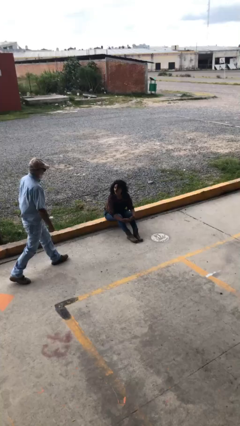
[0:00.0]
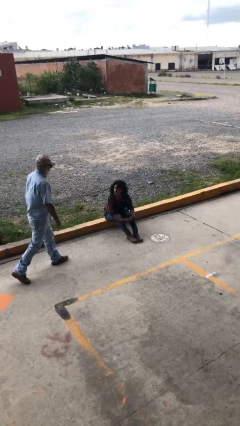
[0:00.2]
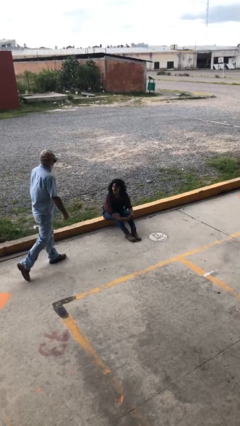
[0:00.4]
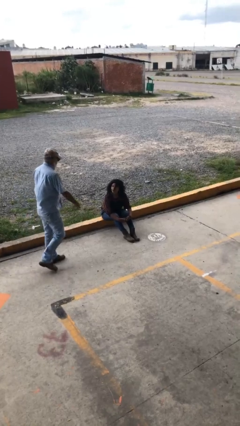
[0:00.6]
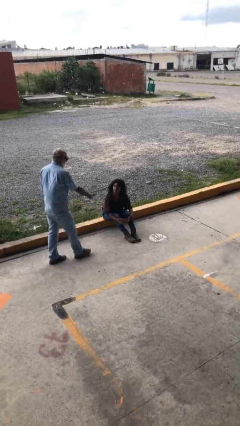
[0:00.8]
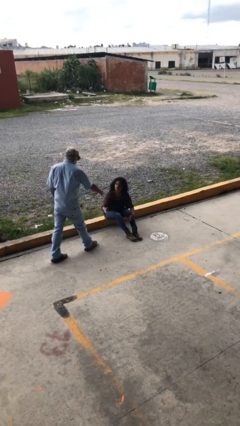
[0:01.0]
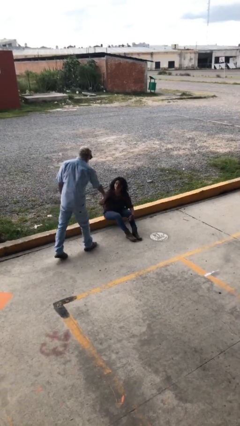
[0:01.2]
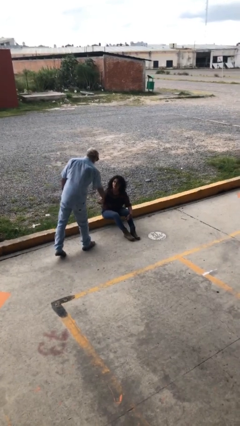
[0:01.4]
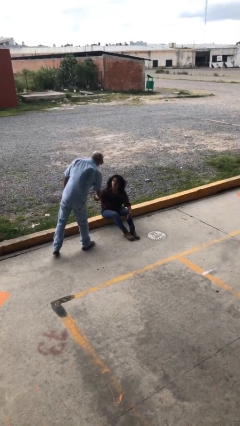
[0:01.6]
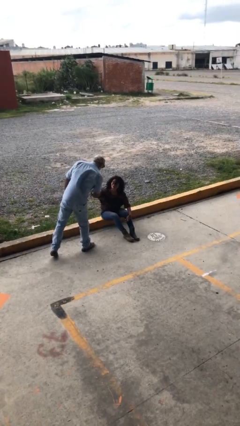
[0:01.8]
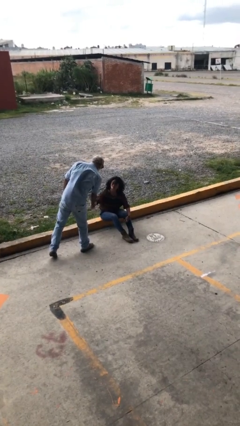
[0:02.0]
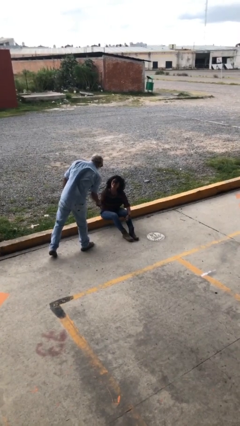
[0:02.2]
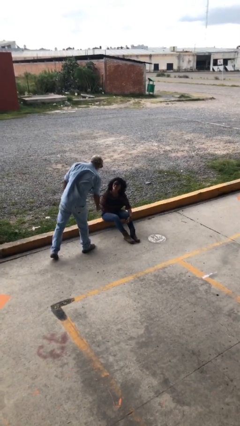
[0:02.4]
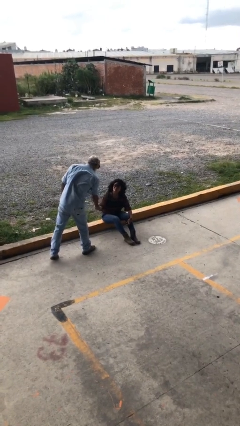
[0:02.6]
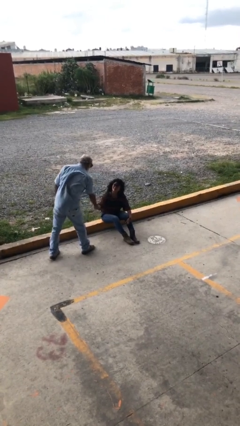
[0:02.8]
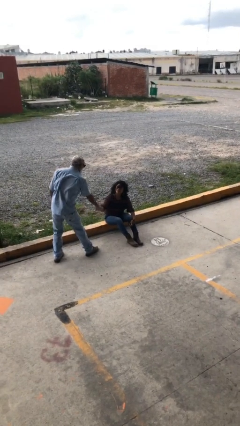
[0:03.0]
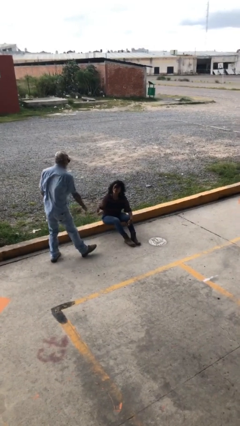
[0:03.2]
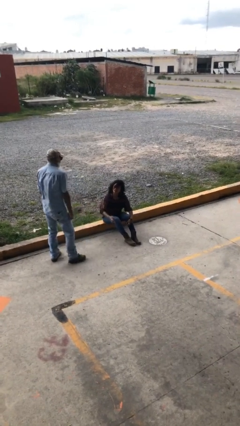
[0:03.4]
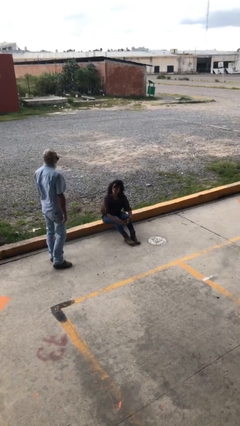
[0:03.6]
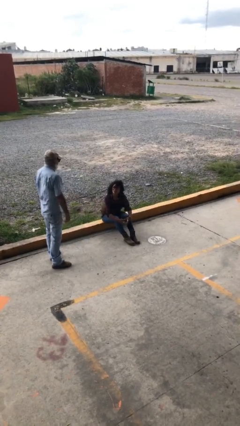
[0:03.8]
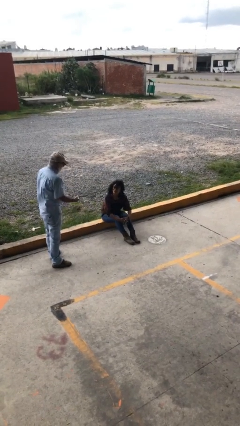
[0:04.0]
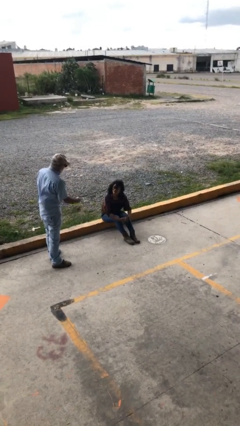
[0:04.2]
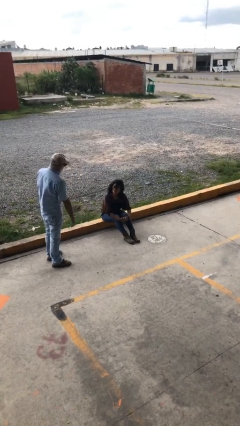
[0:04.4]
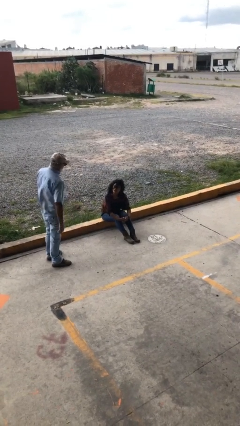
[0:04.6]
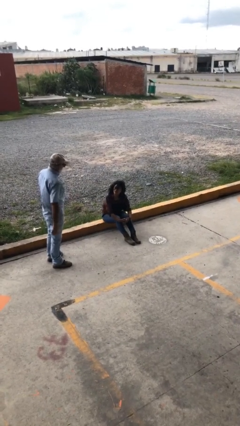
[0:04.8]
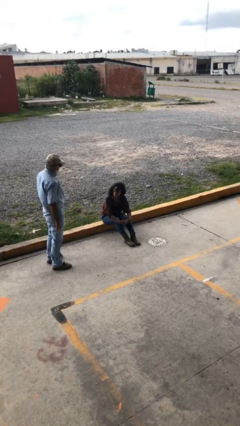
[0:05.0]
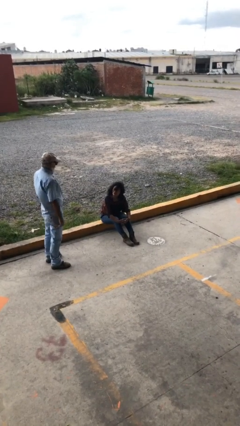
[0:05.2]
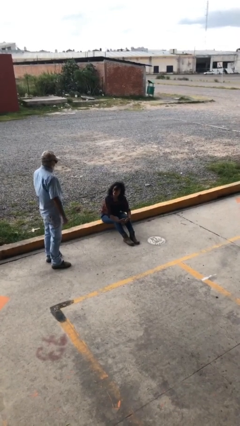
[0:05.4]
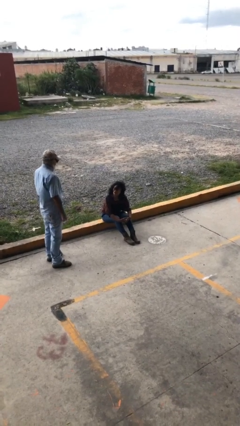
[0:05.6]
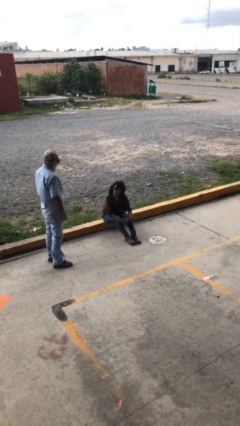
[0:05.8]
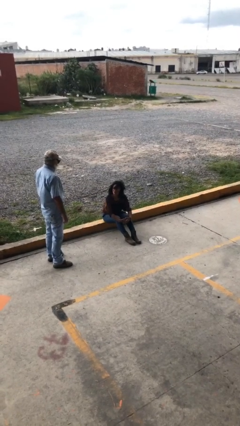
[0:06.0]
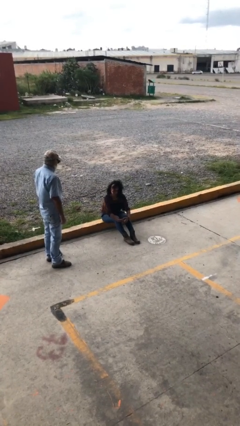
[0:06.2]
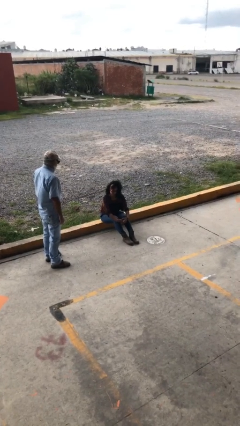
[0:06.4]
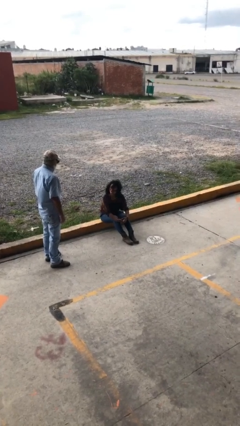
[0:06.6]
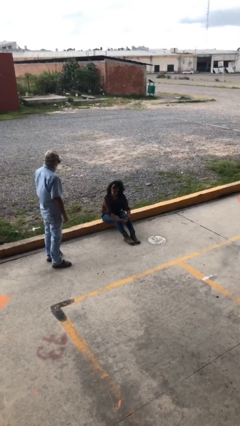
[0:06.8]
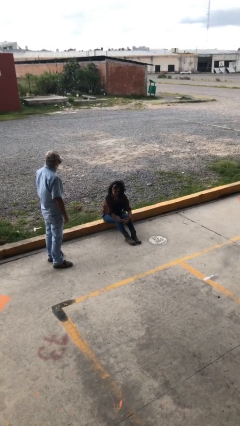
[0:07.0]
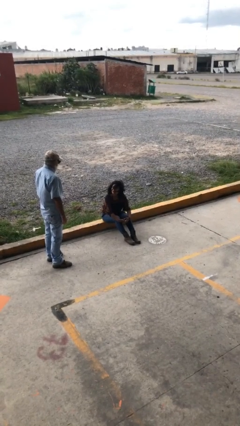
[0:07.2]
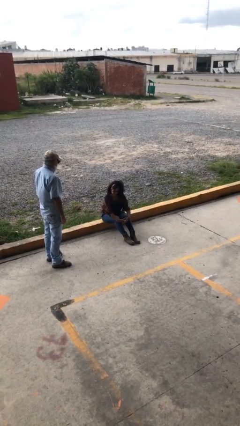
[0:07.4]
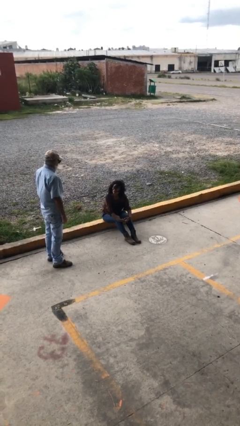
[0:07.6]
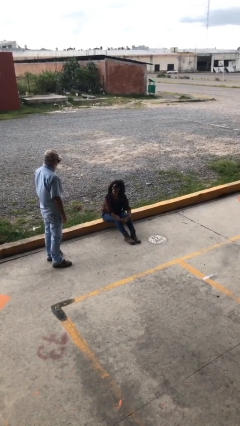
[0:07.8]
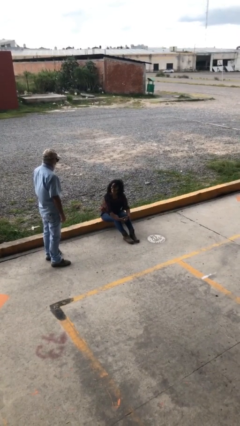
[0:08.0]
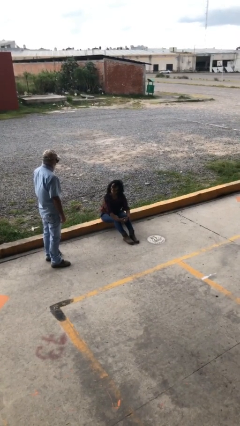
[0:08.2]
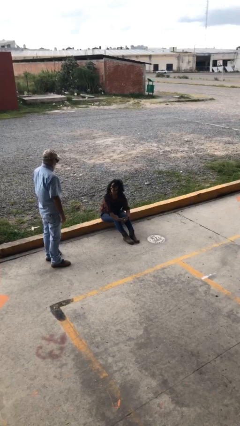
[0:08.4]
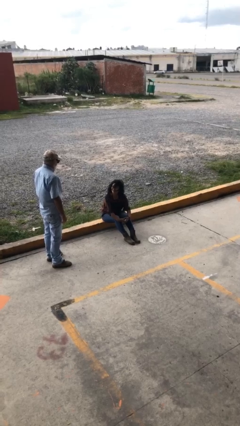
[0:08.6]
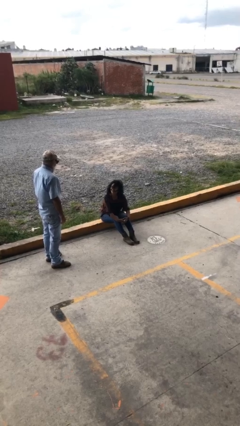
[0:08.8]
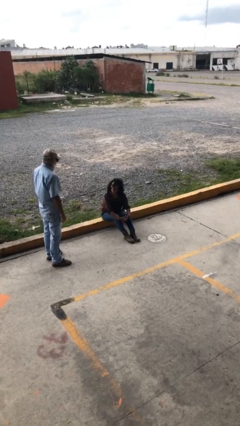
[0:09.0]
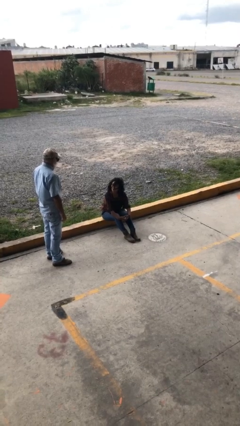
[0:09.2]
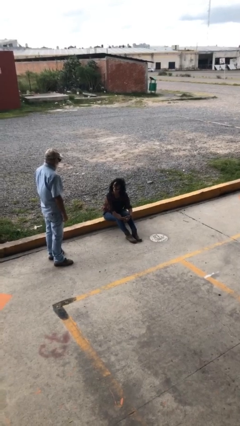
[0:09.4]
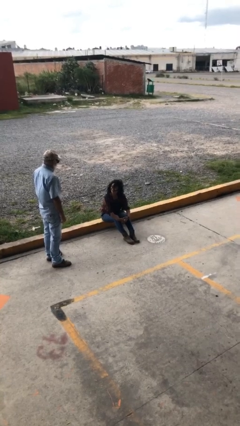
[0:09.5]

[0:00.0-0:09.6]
person shakes hand

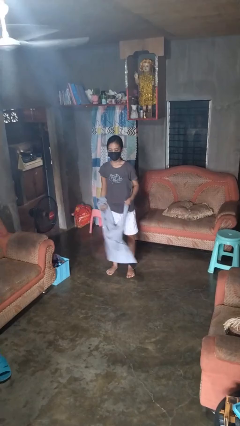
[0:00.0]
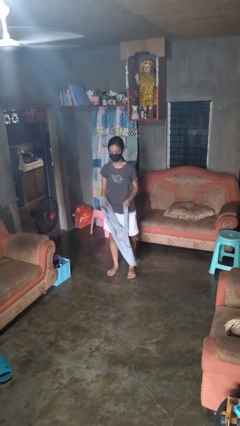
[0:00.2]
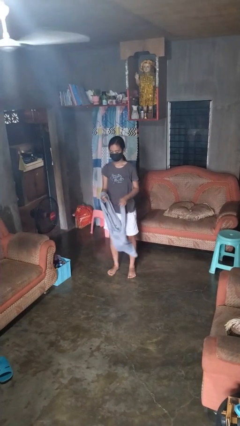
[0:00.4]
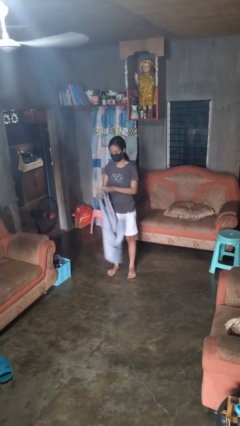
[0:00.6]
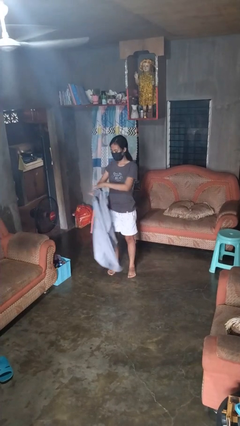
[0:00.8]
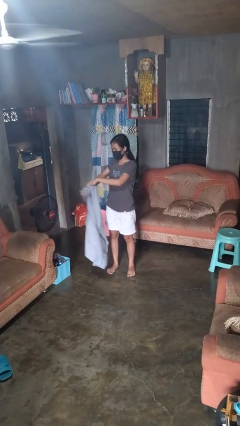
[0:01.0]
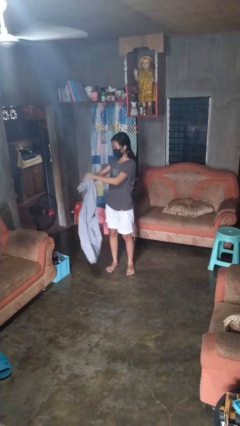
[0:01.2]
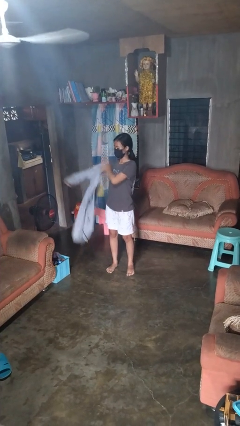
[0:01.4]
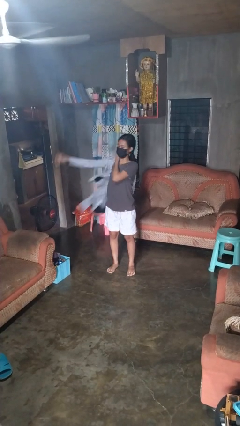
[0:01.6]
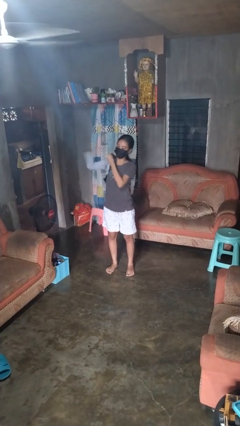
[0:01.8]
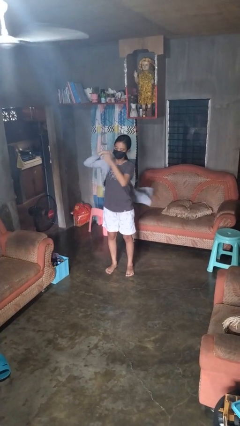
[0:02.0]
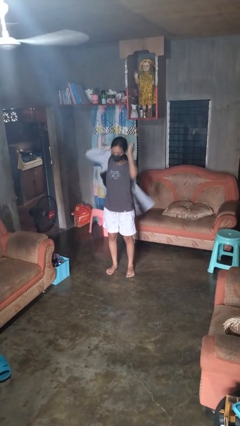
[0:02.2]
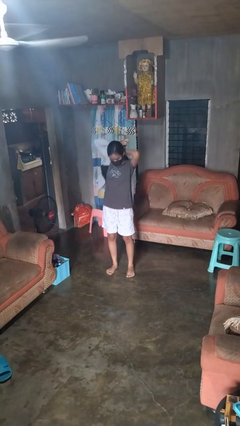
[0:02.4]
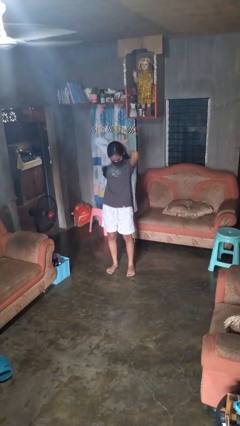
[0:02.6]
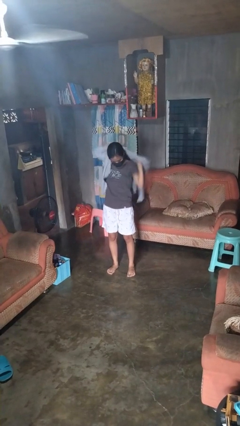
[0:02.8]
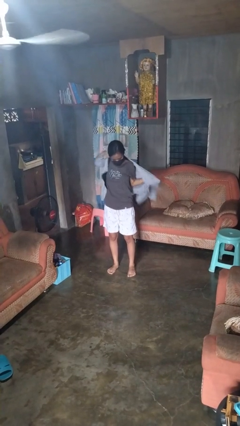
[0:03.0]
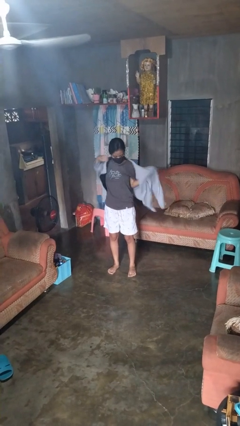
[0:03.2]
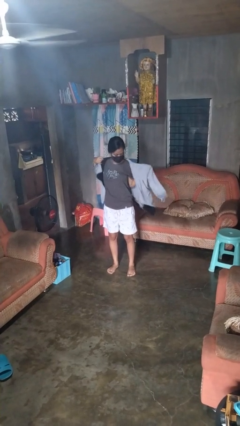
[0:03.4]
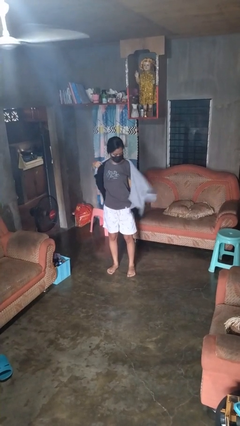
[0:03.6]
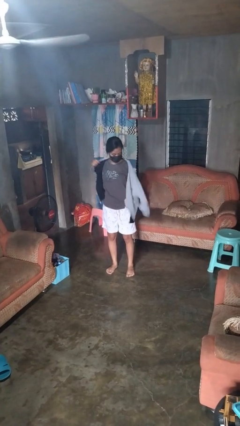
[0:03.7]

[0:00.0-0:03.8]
person puts on jacket

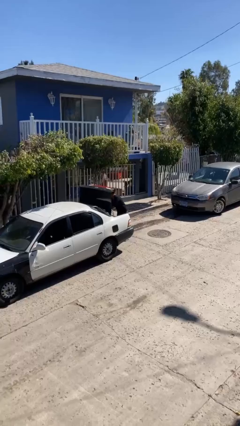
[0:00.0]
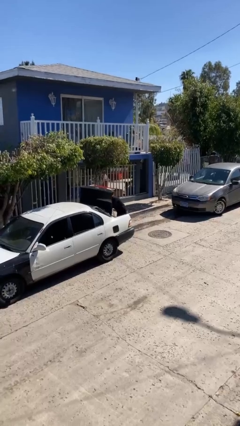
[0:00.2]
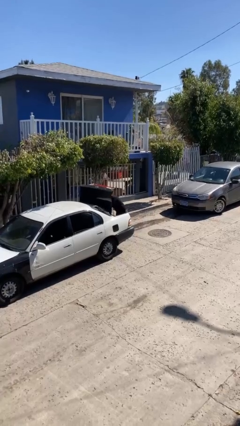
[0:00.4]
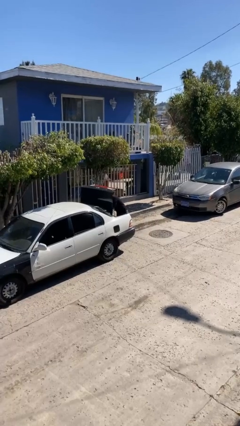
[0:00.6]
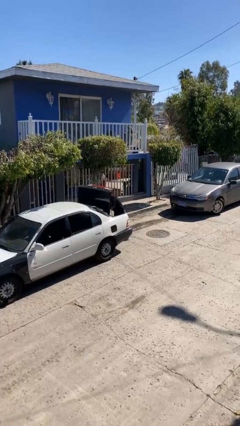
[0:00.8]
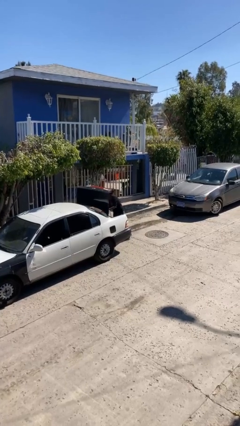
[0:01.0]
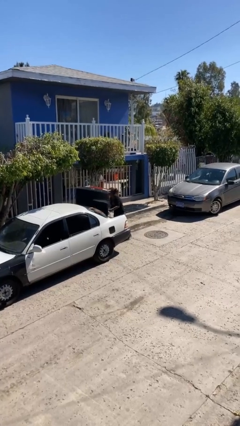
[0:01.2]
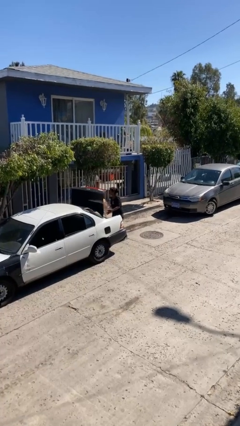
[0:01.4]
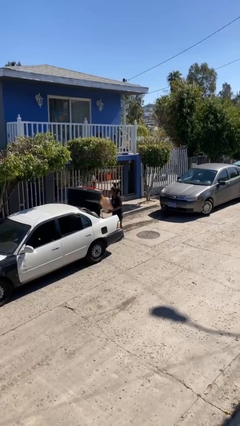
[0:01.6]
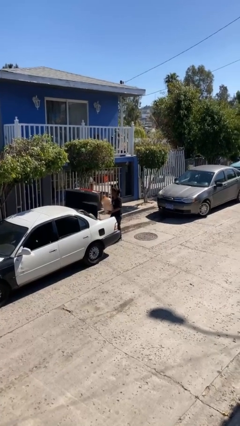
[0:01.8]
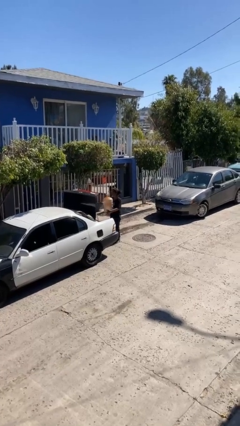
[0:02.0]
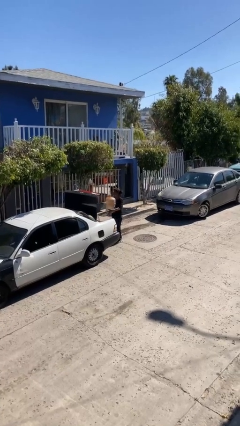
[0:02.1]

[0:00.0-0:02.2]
person unloads car

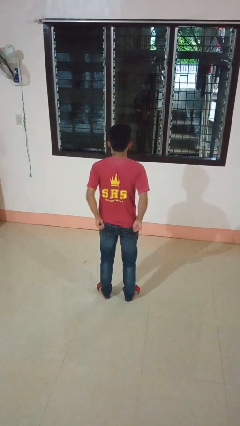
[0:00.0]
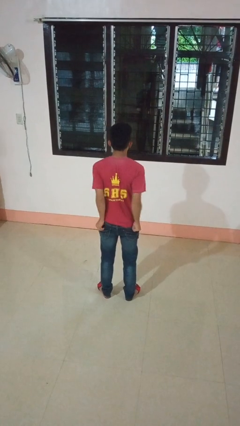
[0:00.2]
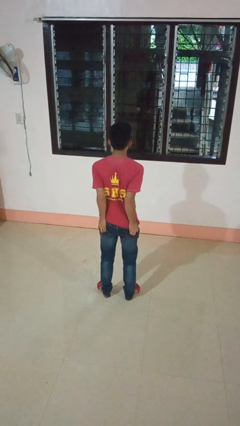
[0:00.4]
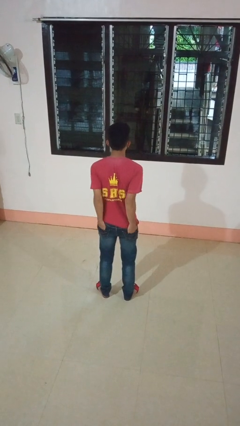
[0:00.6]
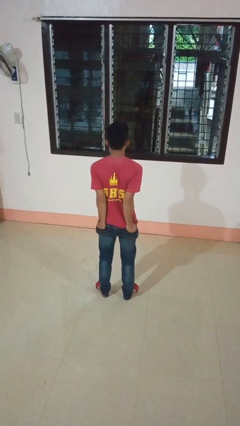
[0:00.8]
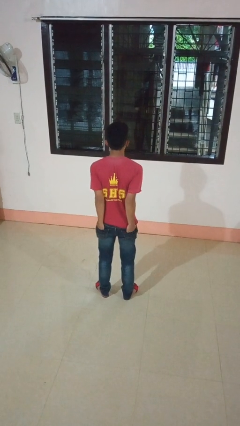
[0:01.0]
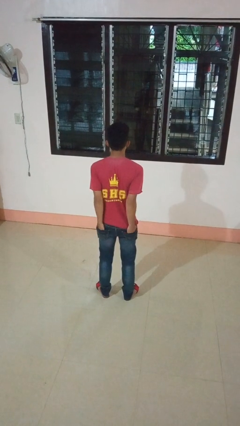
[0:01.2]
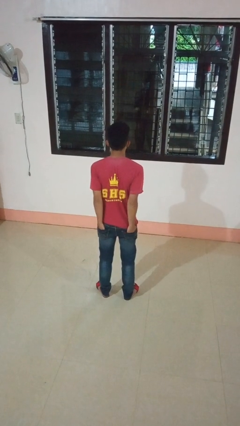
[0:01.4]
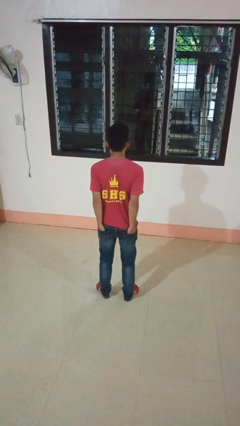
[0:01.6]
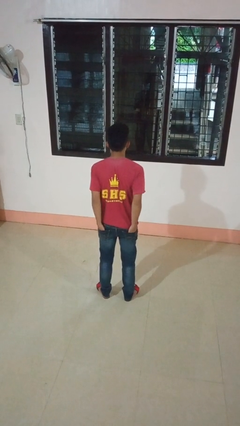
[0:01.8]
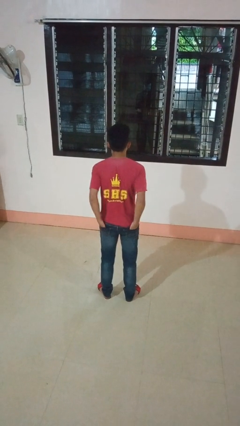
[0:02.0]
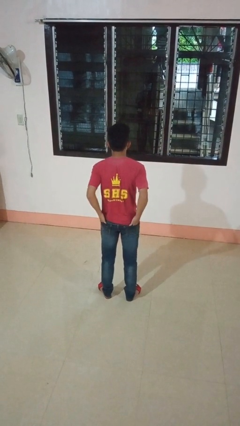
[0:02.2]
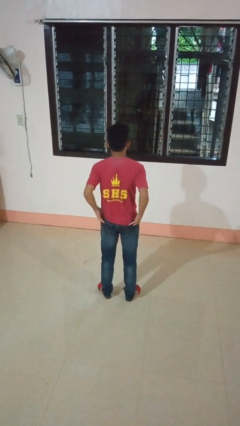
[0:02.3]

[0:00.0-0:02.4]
person puts hands in back pockets
